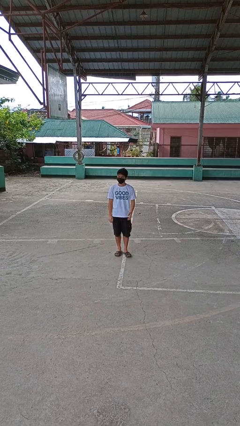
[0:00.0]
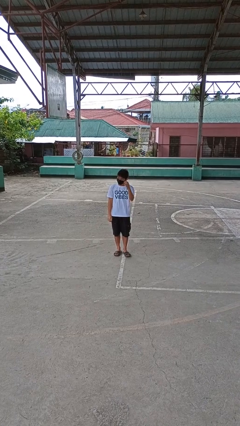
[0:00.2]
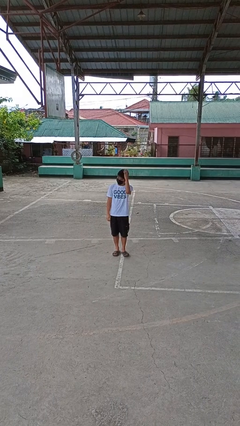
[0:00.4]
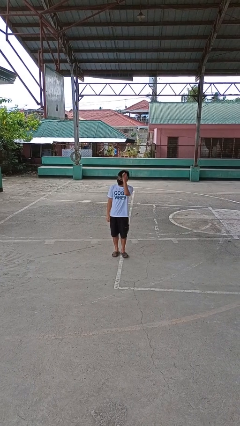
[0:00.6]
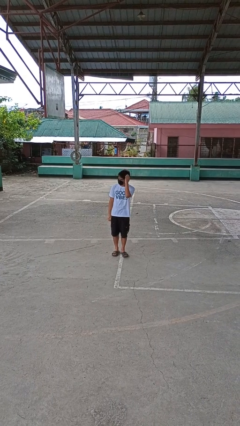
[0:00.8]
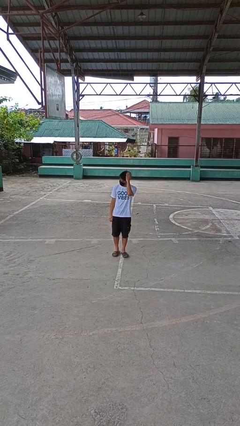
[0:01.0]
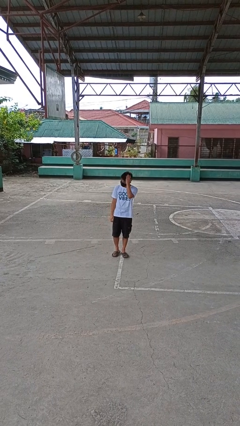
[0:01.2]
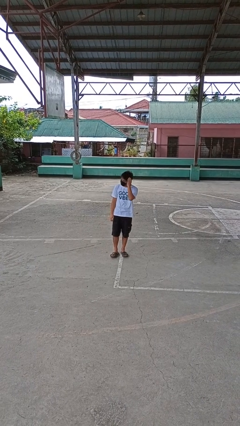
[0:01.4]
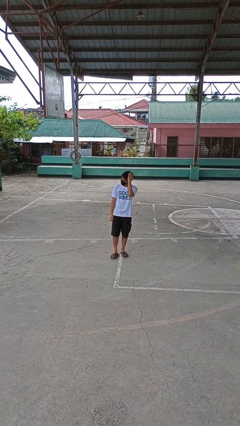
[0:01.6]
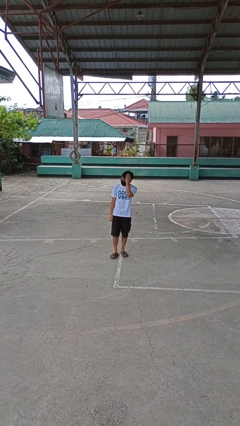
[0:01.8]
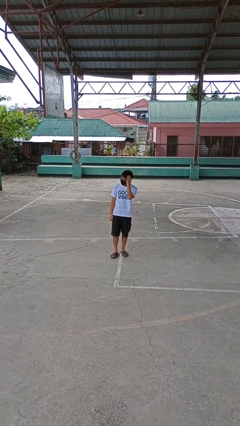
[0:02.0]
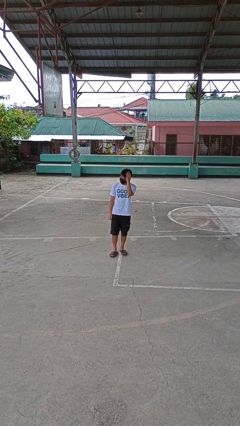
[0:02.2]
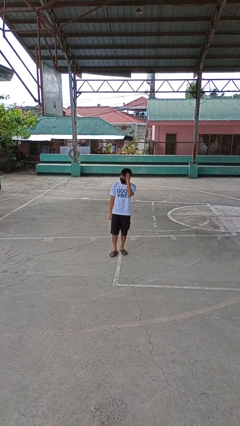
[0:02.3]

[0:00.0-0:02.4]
person pats head

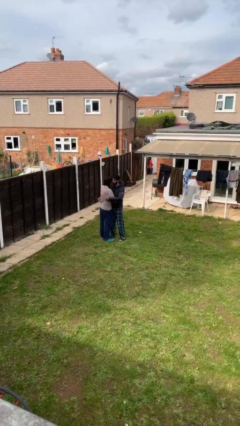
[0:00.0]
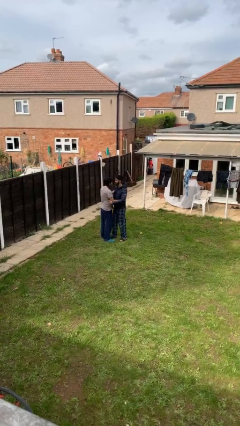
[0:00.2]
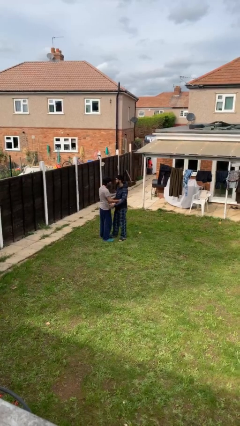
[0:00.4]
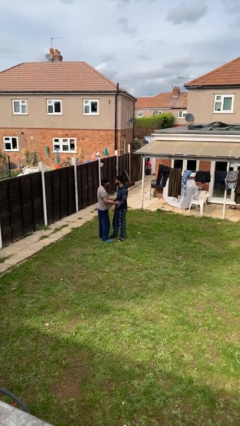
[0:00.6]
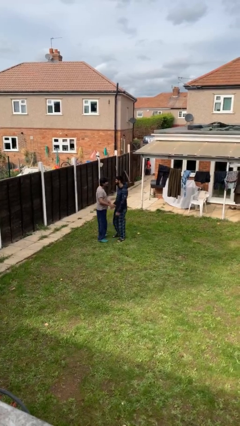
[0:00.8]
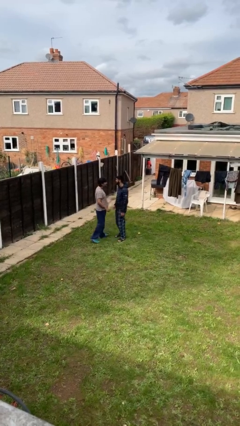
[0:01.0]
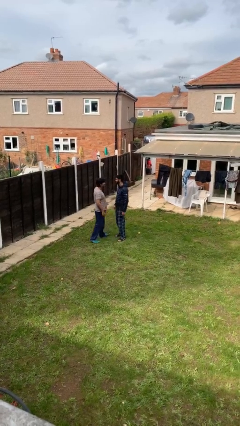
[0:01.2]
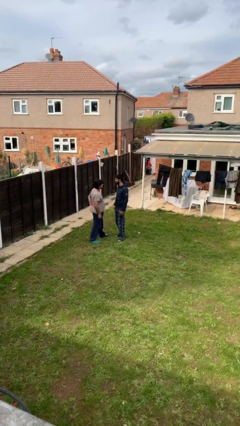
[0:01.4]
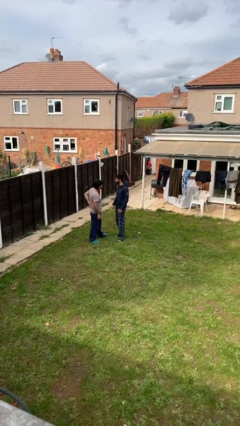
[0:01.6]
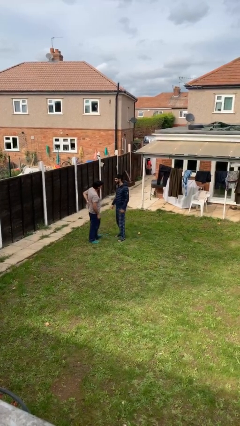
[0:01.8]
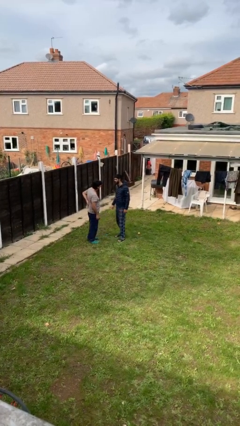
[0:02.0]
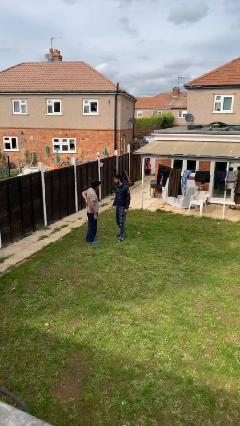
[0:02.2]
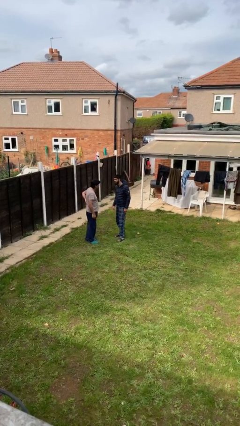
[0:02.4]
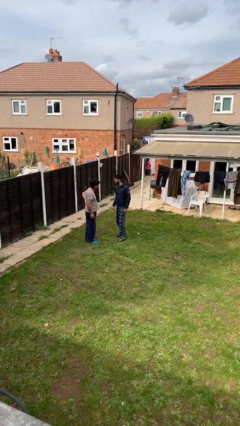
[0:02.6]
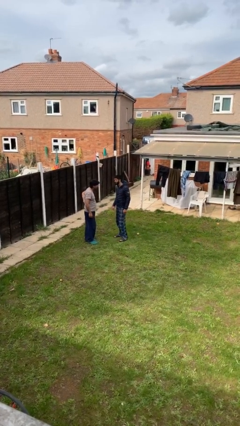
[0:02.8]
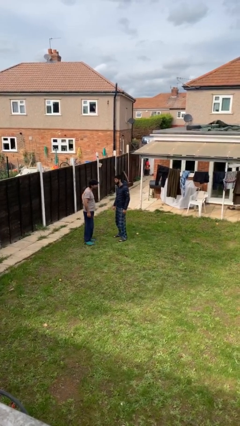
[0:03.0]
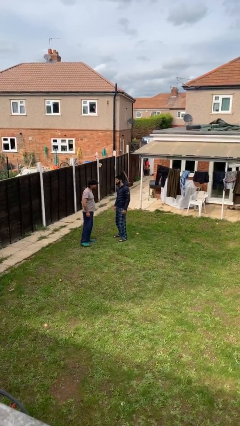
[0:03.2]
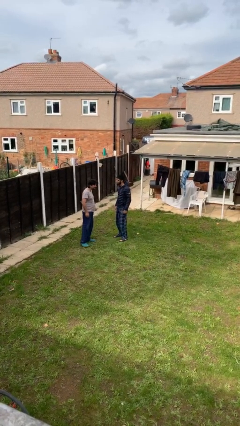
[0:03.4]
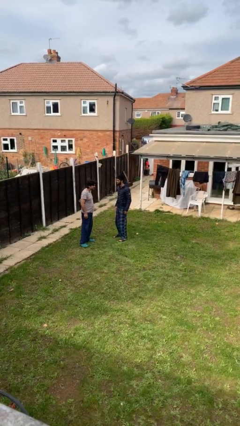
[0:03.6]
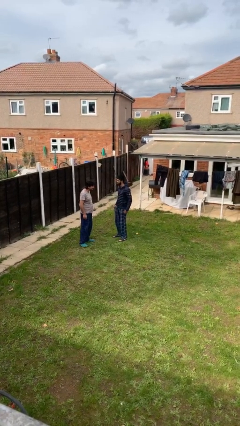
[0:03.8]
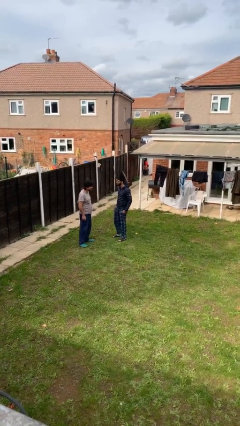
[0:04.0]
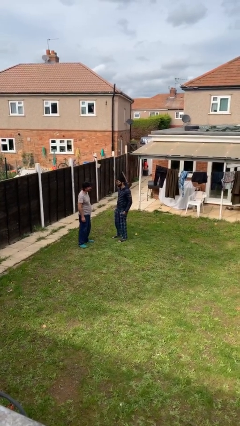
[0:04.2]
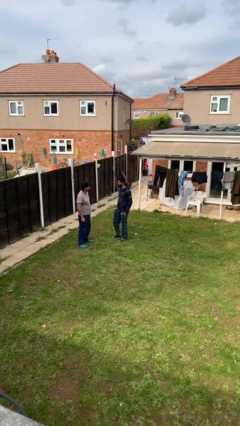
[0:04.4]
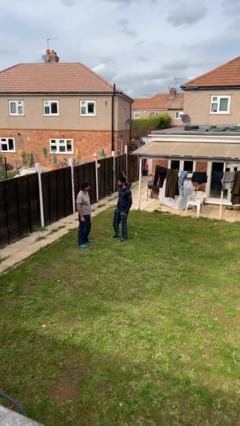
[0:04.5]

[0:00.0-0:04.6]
person talks to person

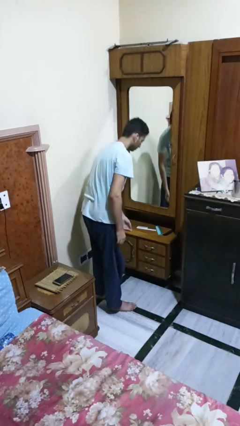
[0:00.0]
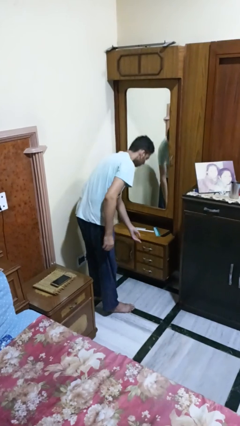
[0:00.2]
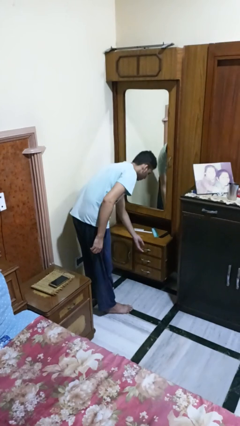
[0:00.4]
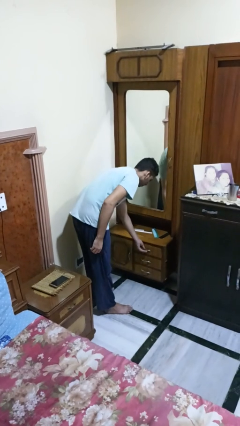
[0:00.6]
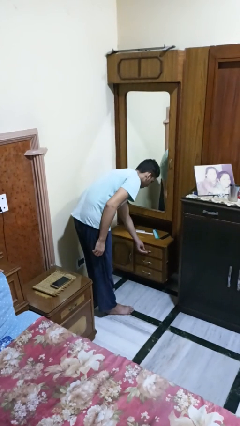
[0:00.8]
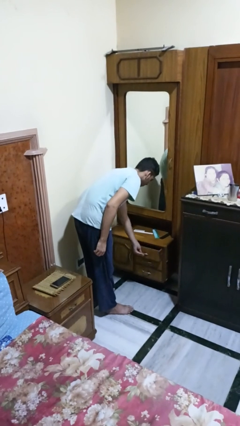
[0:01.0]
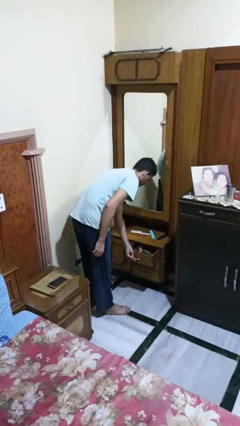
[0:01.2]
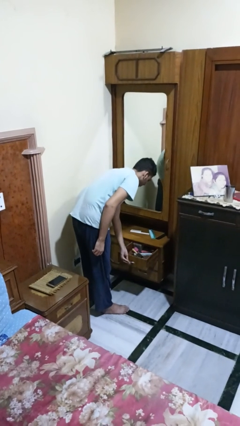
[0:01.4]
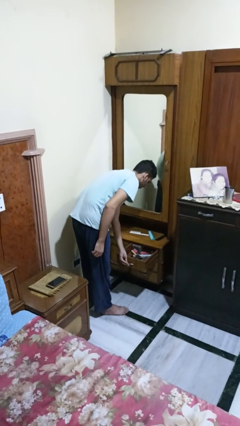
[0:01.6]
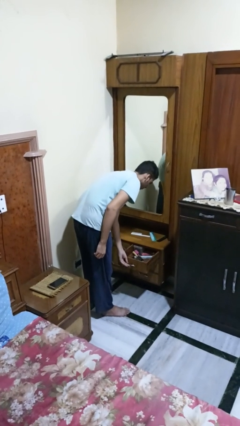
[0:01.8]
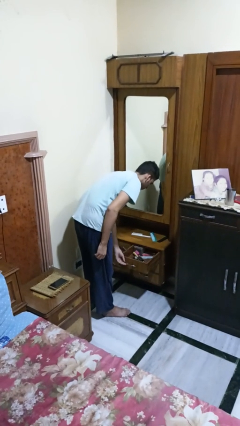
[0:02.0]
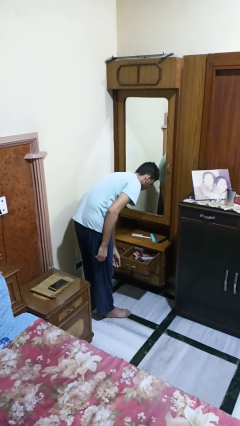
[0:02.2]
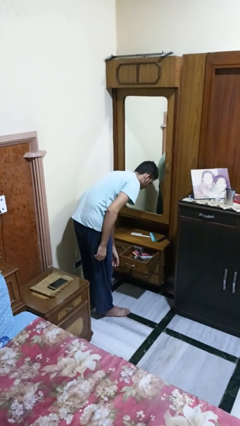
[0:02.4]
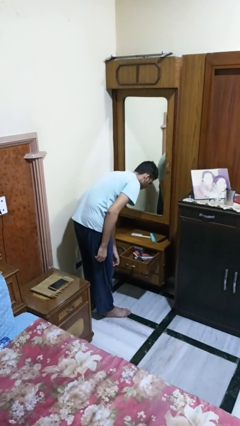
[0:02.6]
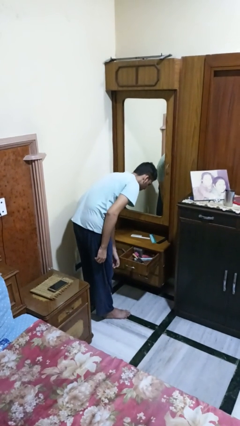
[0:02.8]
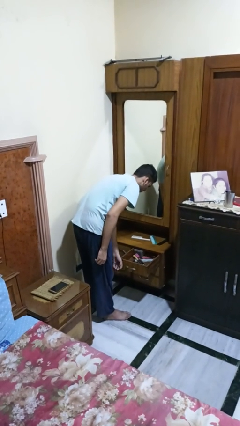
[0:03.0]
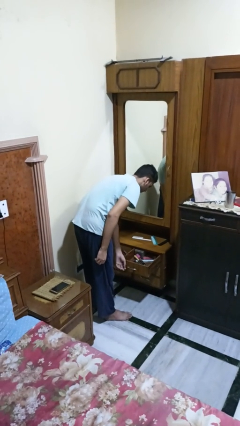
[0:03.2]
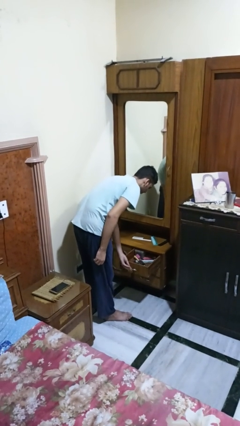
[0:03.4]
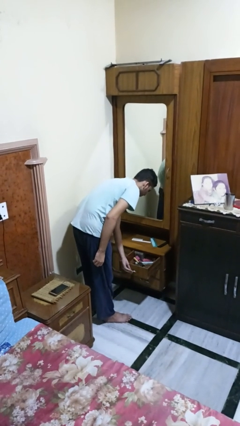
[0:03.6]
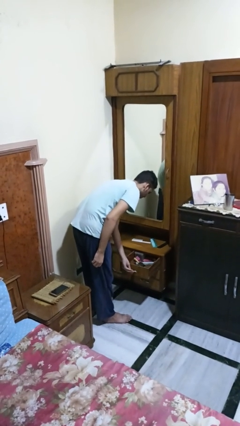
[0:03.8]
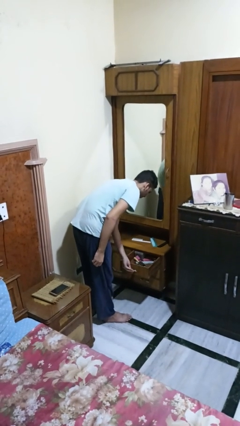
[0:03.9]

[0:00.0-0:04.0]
person opens dresser drawer

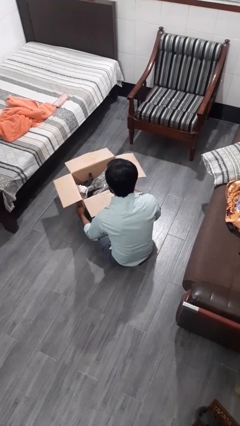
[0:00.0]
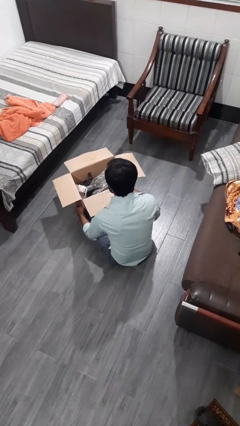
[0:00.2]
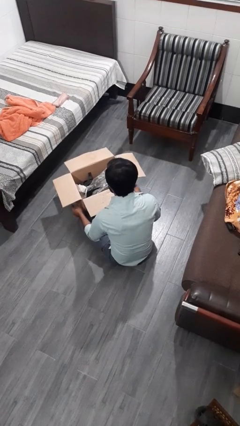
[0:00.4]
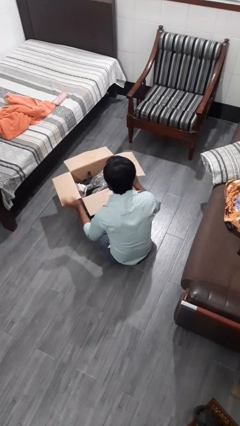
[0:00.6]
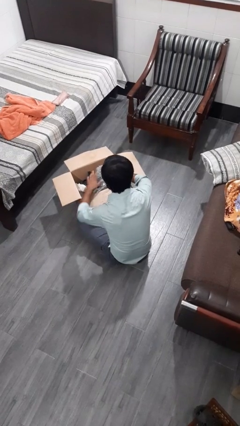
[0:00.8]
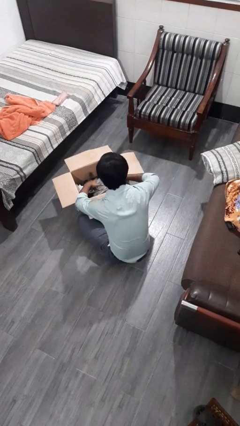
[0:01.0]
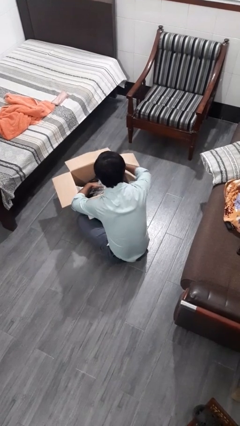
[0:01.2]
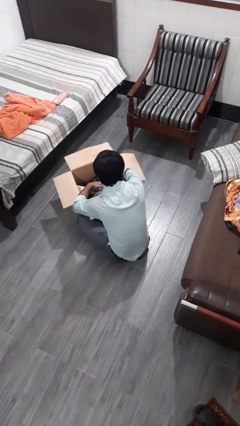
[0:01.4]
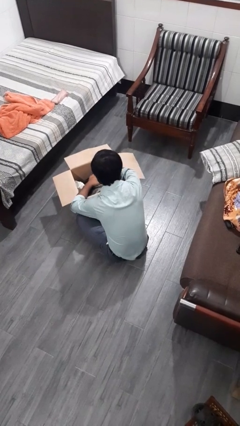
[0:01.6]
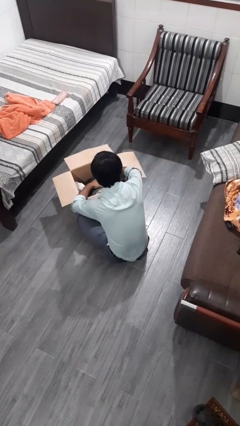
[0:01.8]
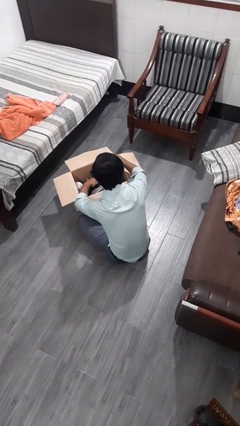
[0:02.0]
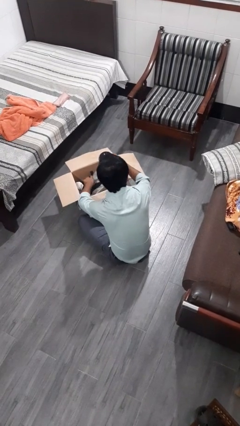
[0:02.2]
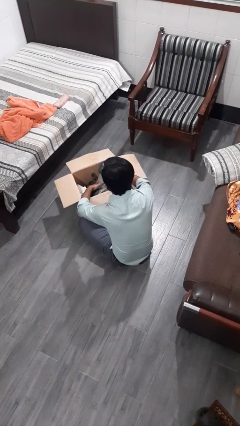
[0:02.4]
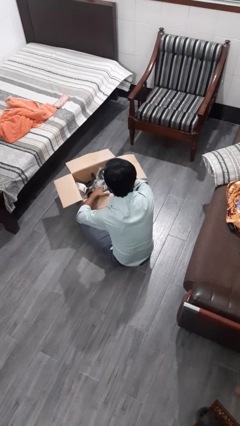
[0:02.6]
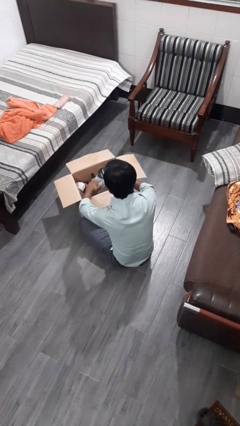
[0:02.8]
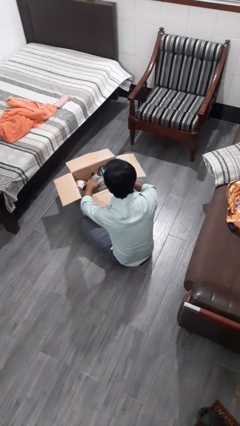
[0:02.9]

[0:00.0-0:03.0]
person searches in box

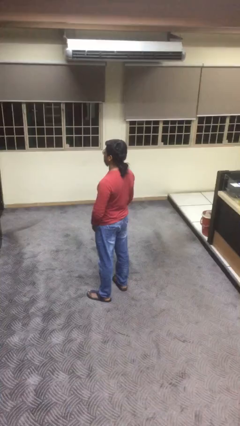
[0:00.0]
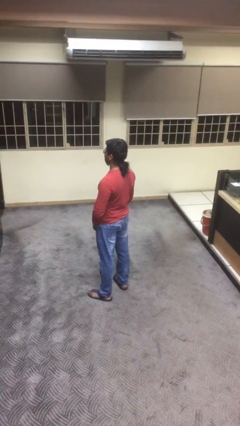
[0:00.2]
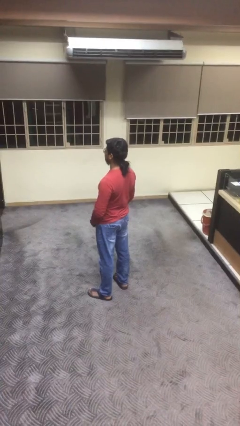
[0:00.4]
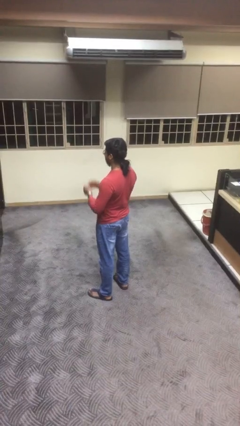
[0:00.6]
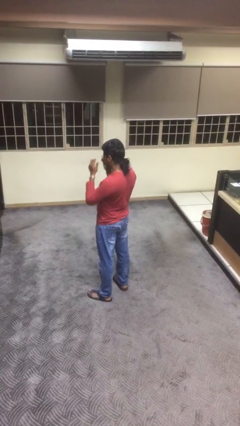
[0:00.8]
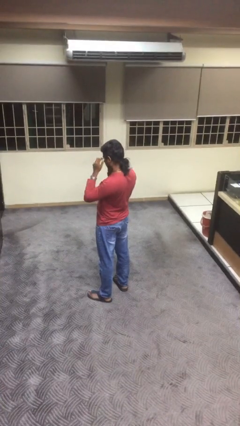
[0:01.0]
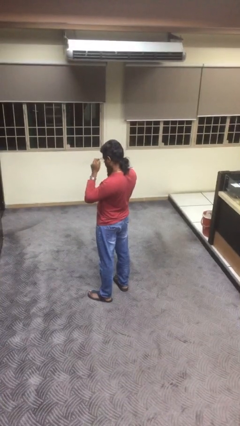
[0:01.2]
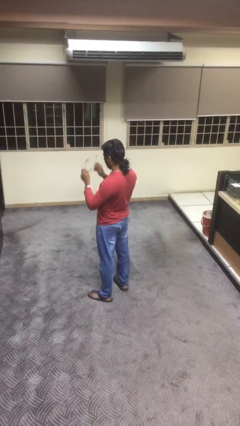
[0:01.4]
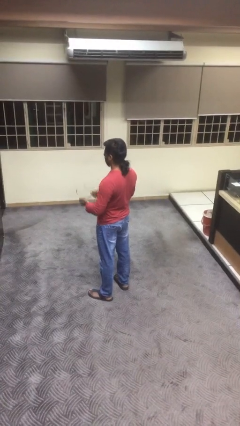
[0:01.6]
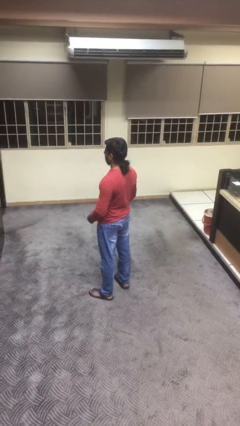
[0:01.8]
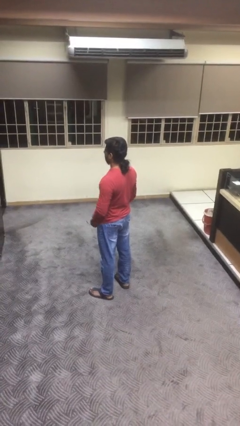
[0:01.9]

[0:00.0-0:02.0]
person takes off glasses

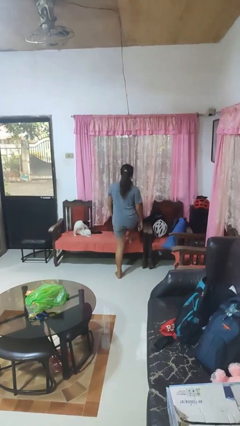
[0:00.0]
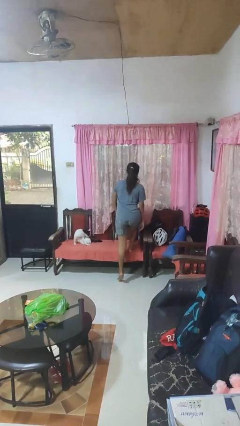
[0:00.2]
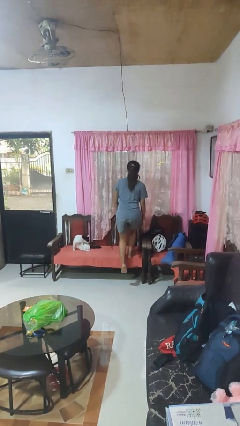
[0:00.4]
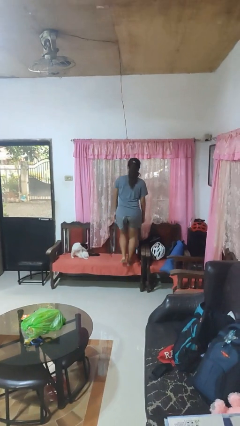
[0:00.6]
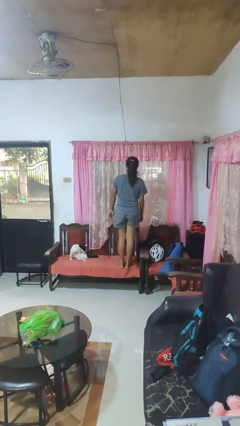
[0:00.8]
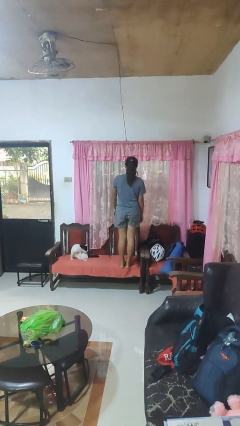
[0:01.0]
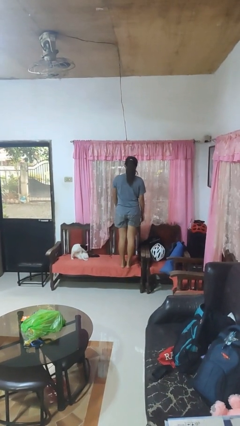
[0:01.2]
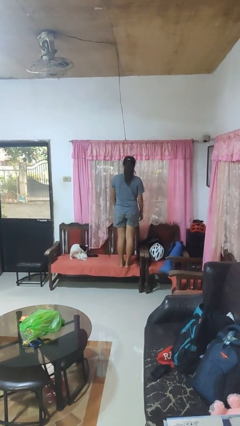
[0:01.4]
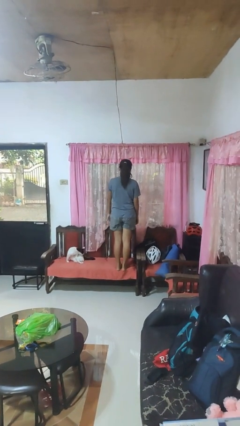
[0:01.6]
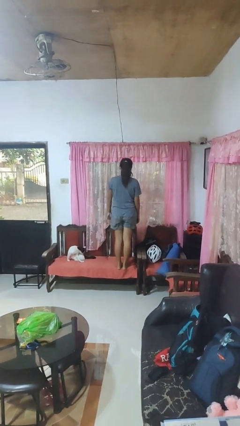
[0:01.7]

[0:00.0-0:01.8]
person climbs on chair
